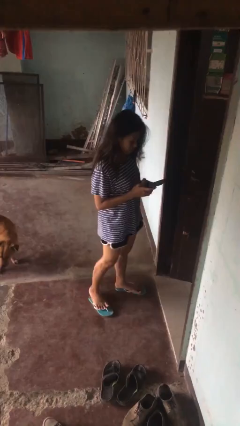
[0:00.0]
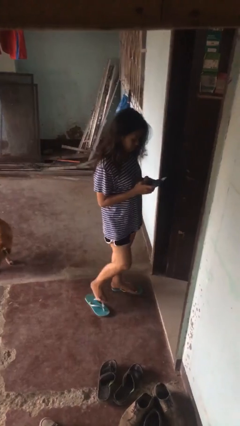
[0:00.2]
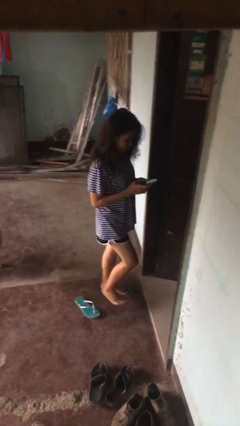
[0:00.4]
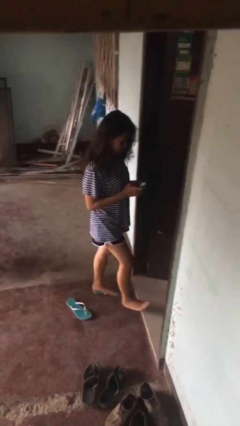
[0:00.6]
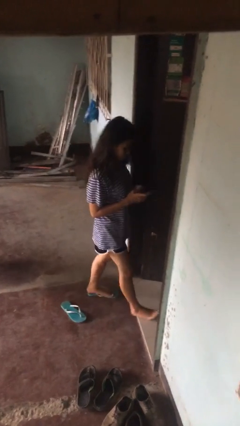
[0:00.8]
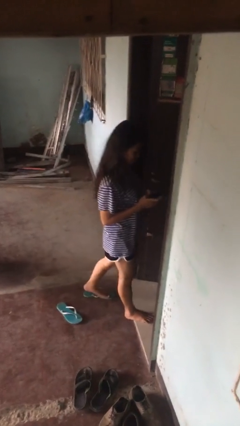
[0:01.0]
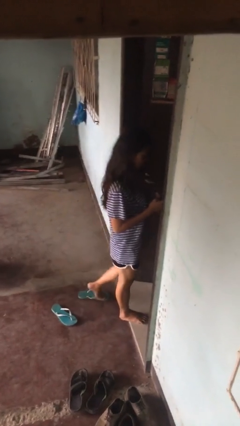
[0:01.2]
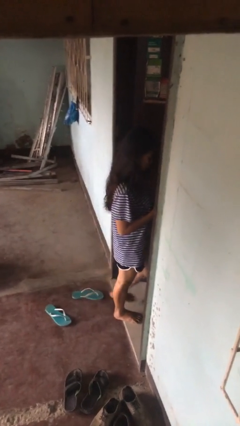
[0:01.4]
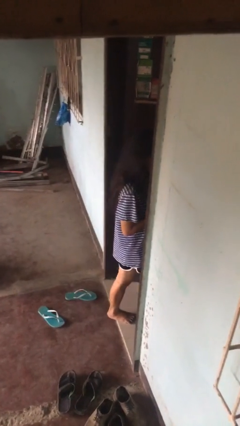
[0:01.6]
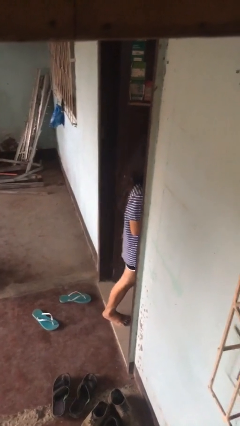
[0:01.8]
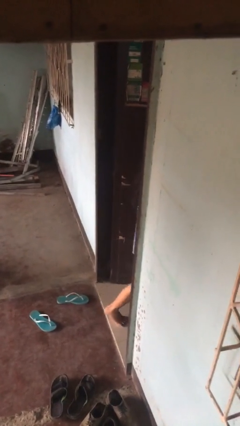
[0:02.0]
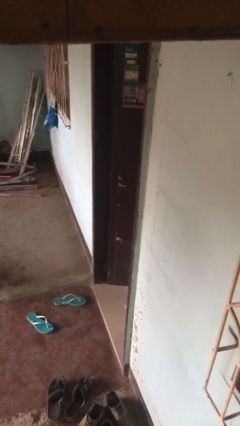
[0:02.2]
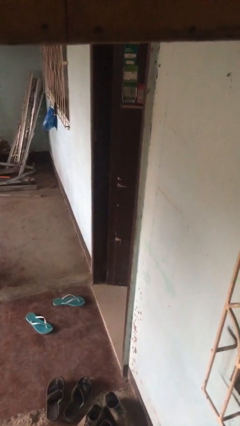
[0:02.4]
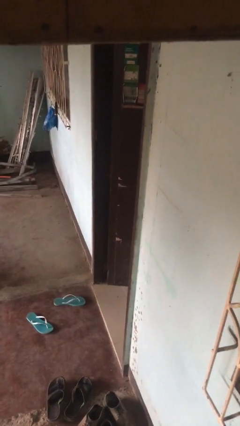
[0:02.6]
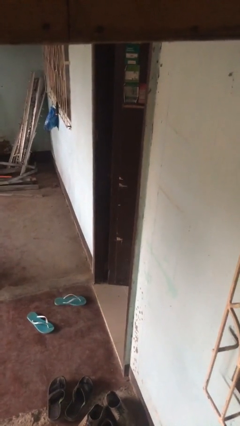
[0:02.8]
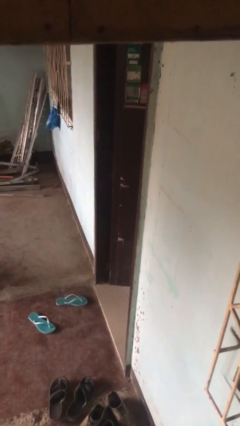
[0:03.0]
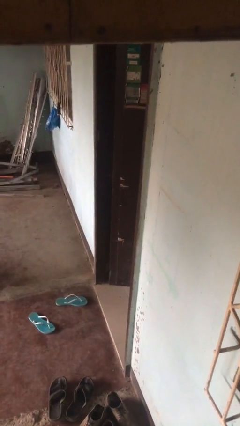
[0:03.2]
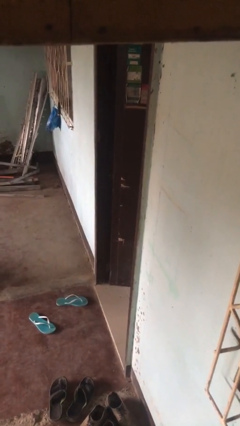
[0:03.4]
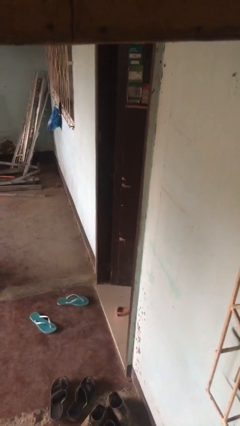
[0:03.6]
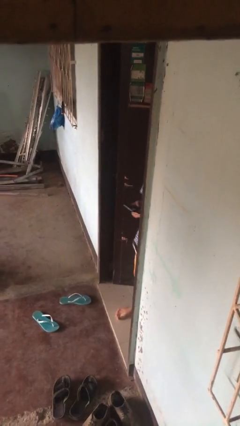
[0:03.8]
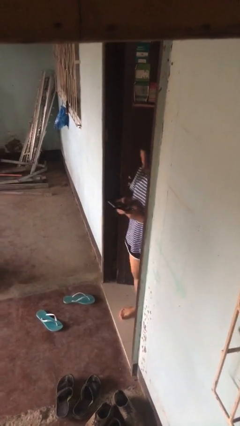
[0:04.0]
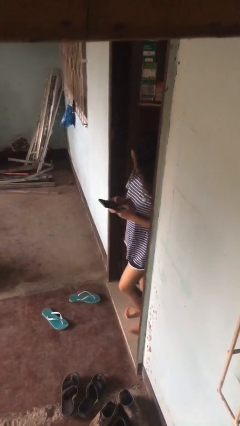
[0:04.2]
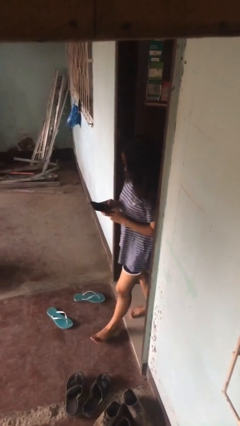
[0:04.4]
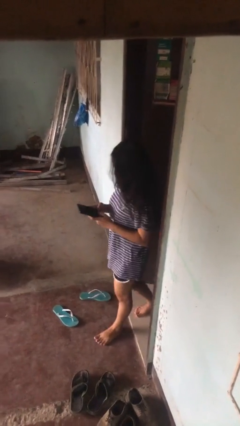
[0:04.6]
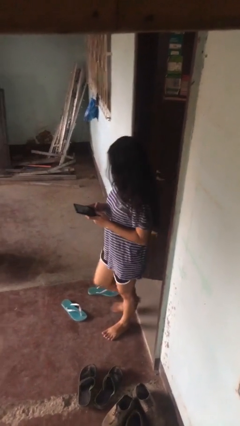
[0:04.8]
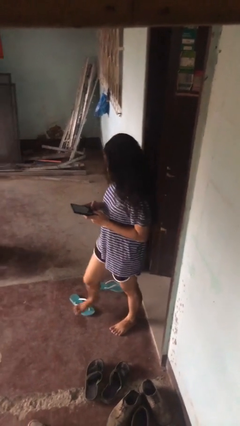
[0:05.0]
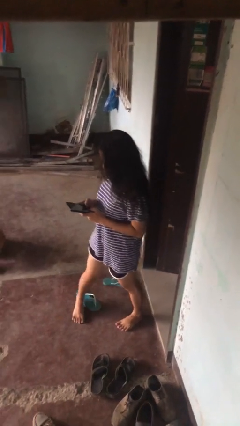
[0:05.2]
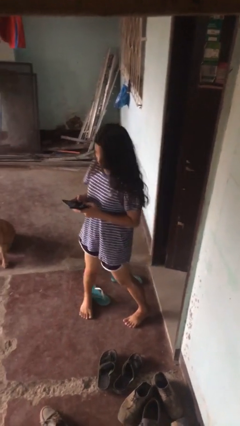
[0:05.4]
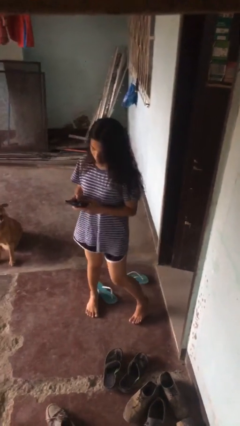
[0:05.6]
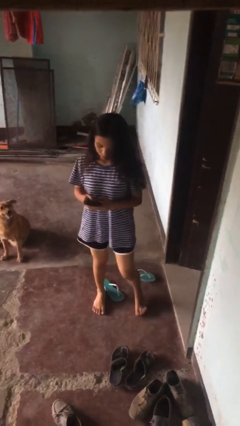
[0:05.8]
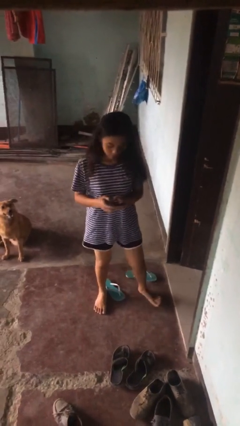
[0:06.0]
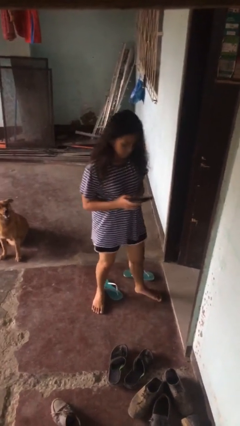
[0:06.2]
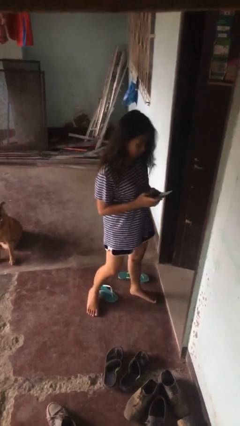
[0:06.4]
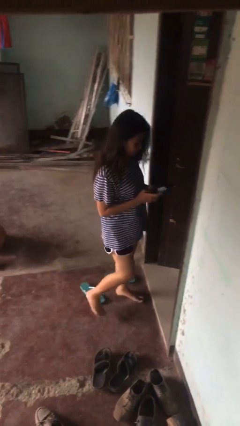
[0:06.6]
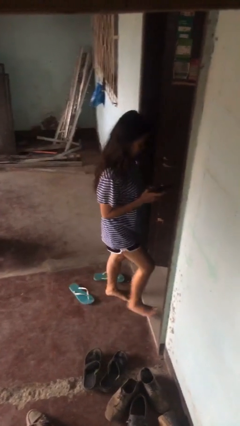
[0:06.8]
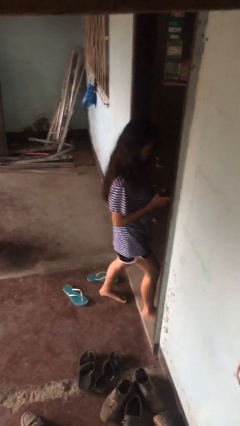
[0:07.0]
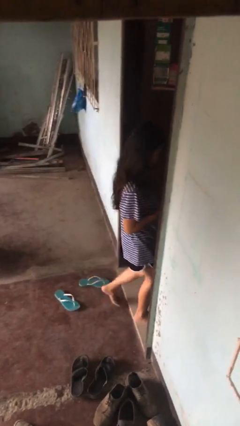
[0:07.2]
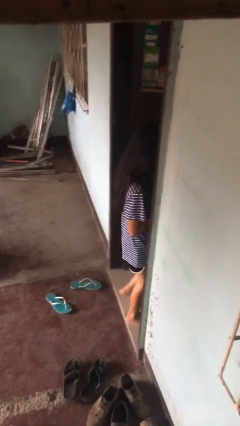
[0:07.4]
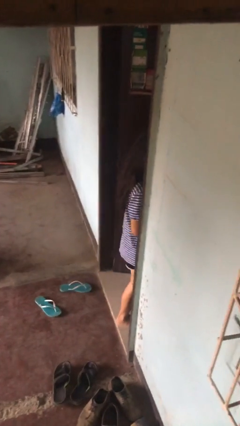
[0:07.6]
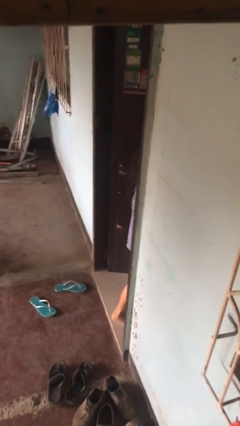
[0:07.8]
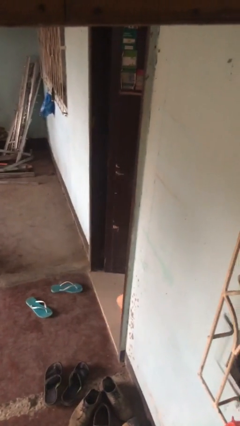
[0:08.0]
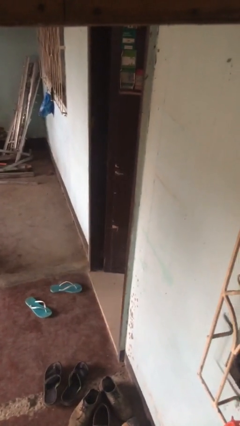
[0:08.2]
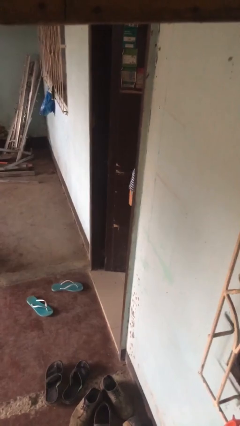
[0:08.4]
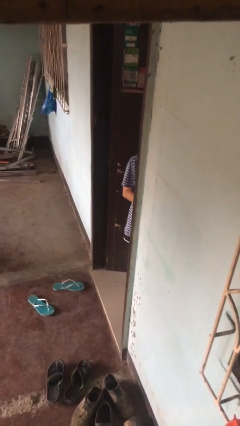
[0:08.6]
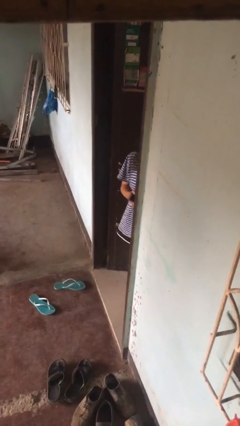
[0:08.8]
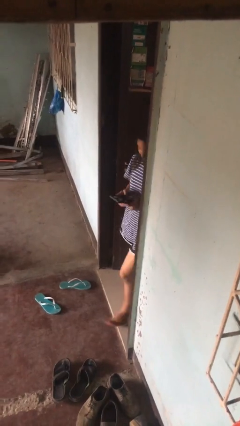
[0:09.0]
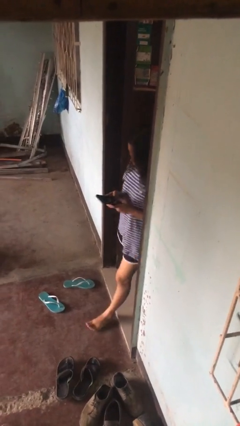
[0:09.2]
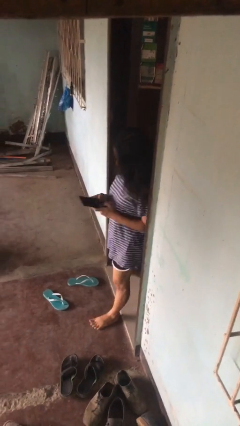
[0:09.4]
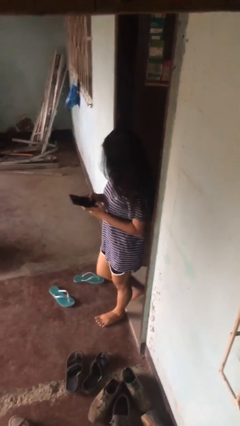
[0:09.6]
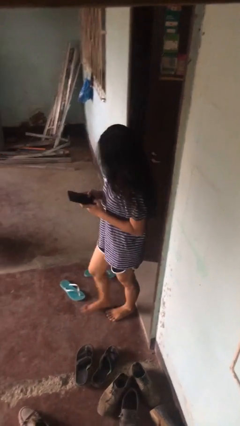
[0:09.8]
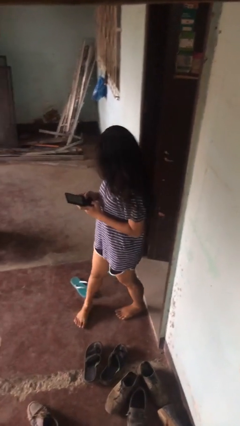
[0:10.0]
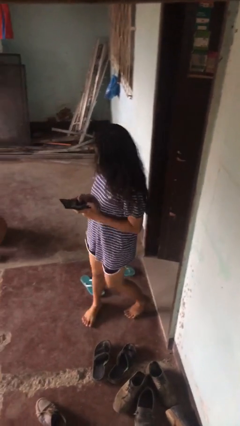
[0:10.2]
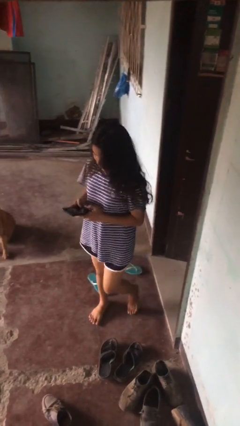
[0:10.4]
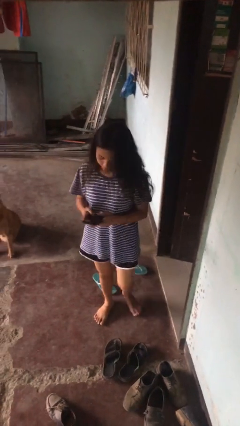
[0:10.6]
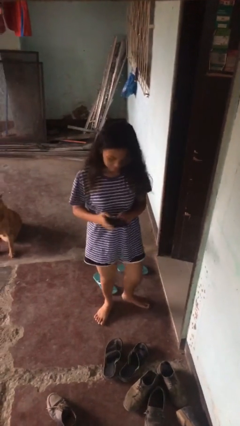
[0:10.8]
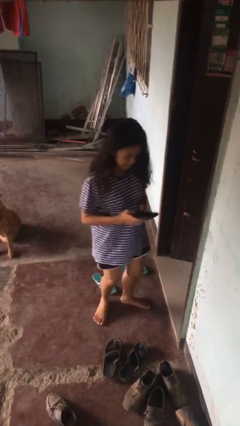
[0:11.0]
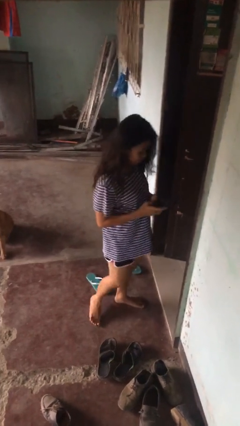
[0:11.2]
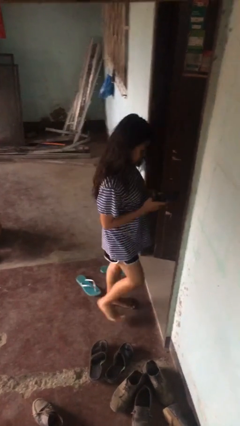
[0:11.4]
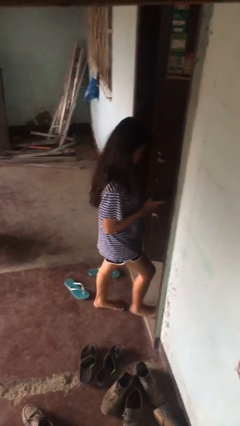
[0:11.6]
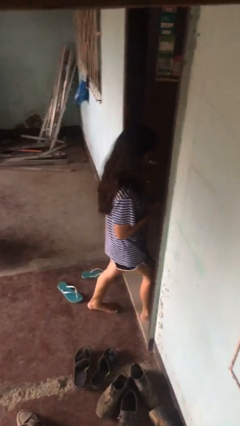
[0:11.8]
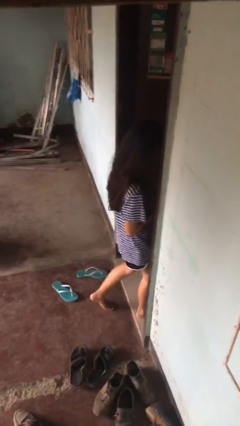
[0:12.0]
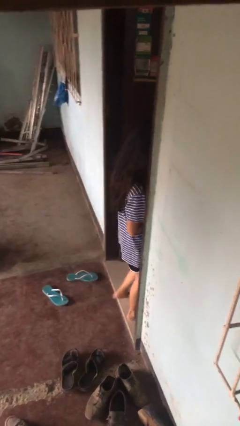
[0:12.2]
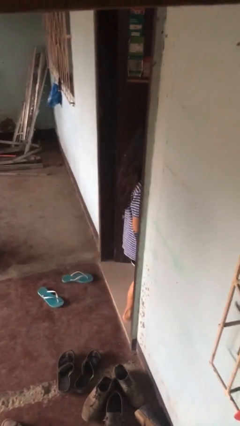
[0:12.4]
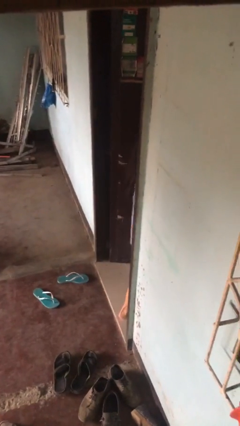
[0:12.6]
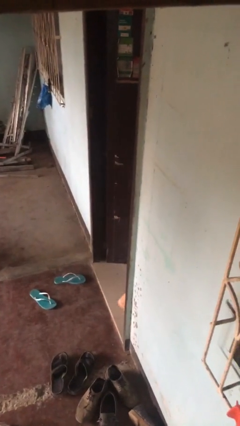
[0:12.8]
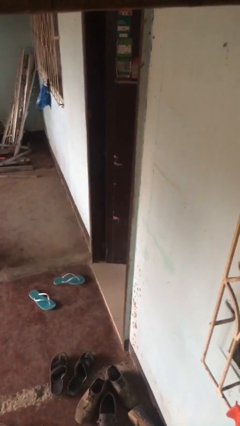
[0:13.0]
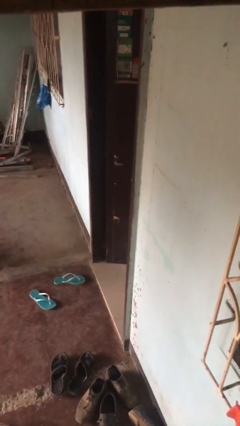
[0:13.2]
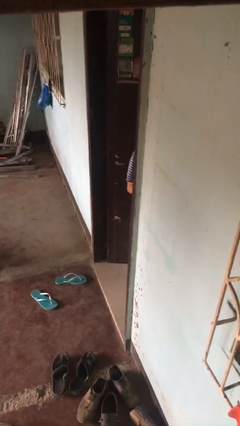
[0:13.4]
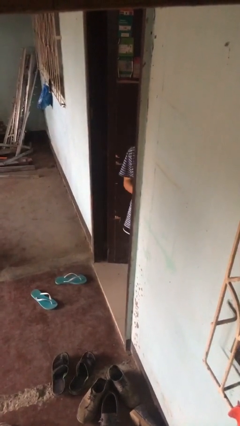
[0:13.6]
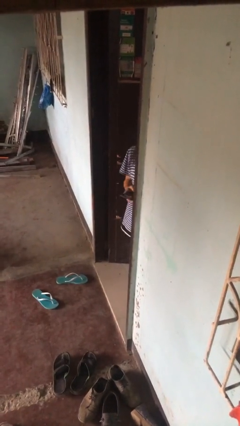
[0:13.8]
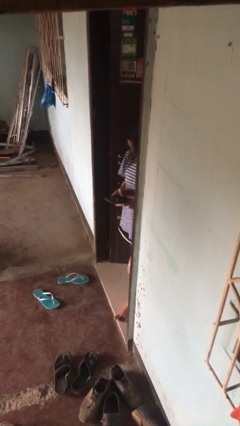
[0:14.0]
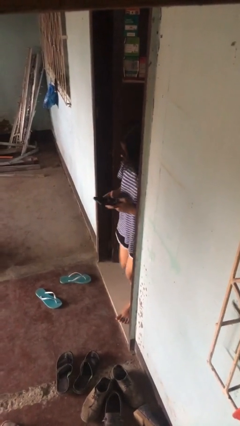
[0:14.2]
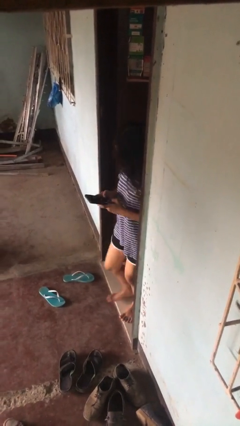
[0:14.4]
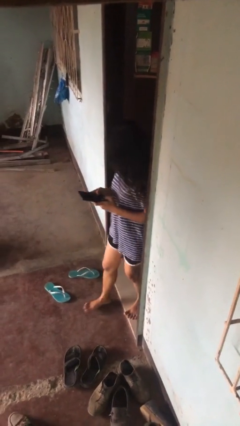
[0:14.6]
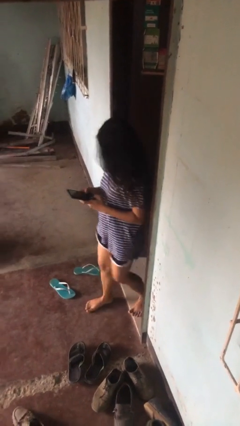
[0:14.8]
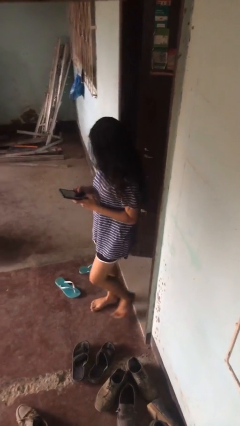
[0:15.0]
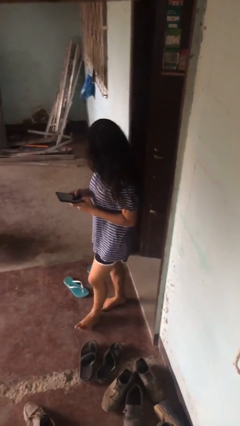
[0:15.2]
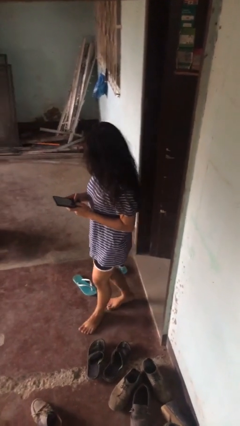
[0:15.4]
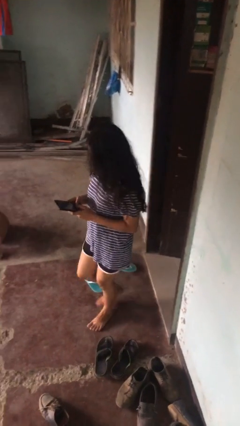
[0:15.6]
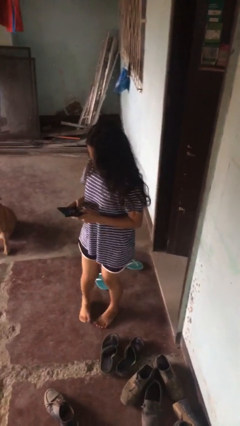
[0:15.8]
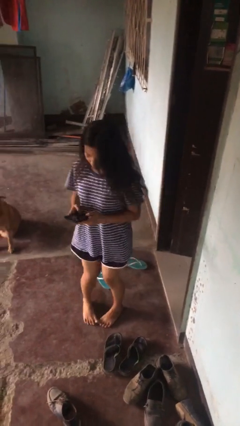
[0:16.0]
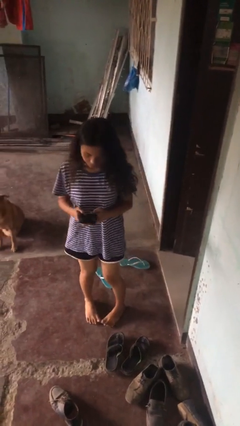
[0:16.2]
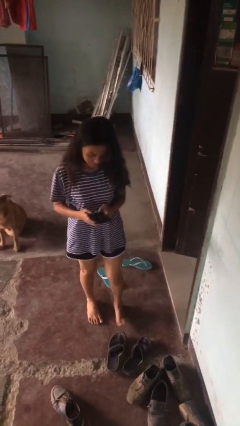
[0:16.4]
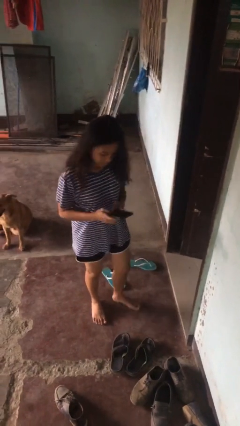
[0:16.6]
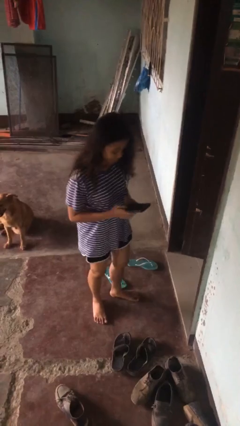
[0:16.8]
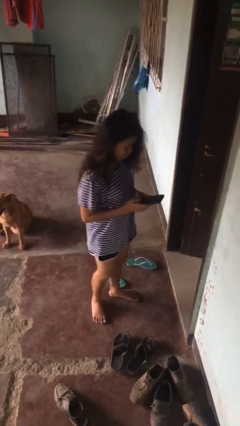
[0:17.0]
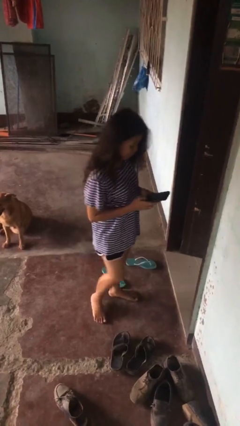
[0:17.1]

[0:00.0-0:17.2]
person texts on phone

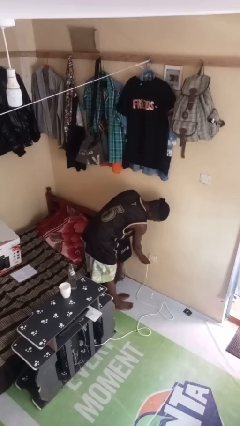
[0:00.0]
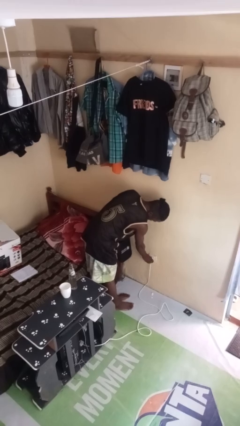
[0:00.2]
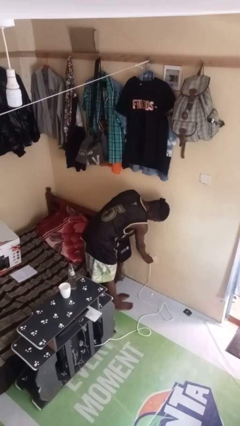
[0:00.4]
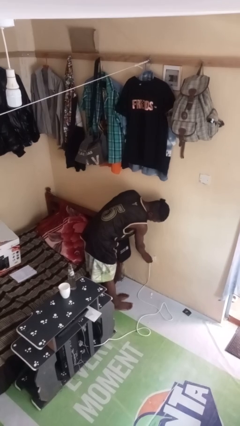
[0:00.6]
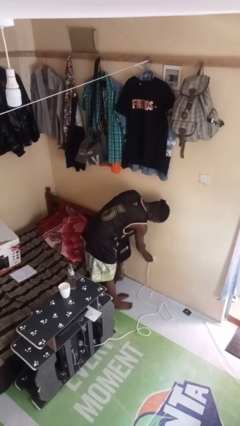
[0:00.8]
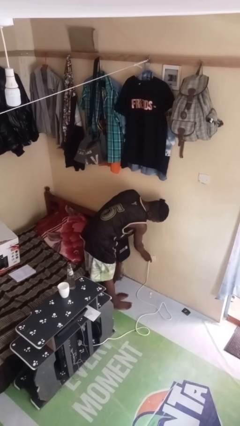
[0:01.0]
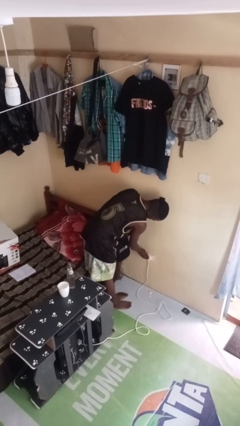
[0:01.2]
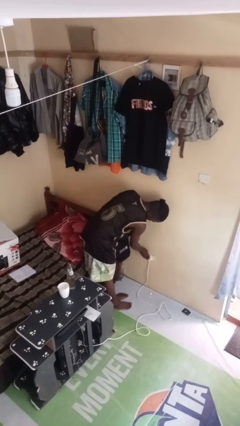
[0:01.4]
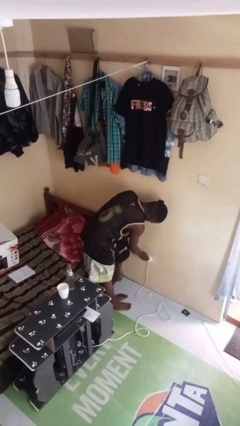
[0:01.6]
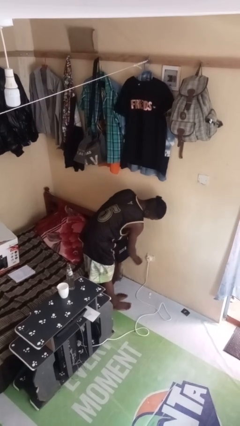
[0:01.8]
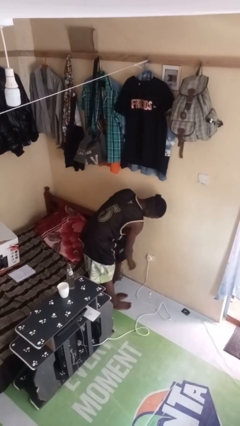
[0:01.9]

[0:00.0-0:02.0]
person plugs into electrical socket
